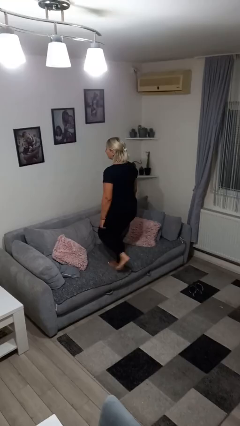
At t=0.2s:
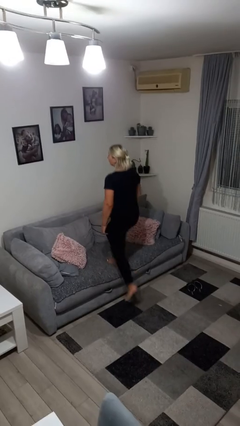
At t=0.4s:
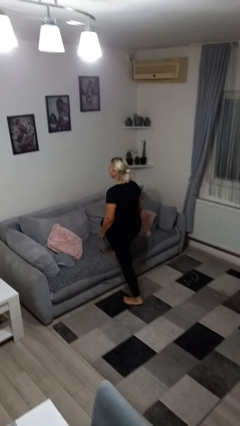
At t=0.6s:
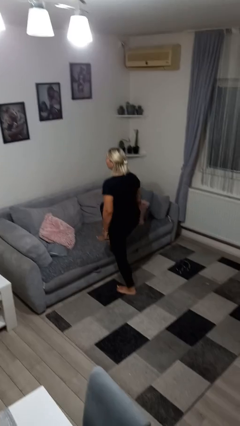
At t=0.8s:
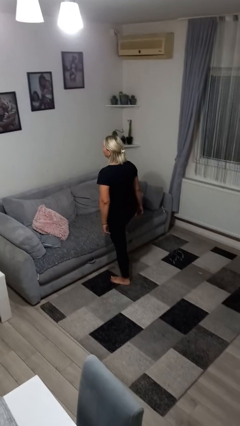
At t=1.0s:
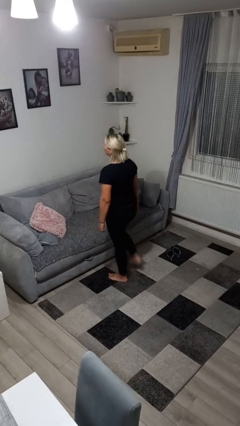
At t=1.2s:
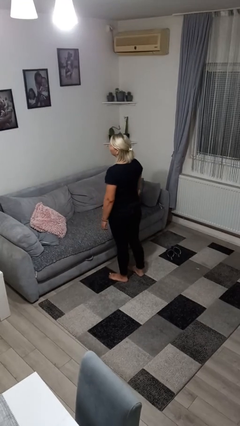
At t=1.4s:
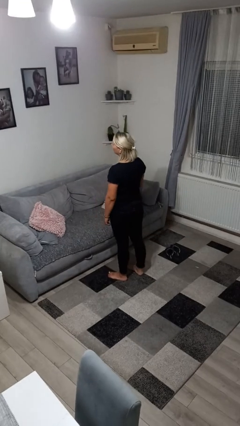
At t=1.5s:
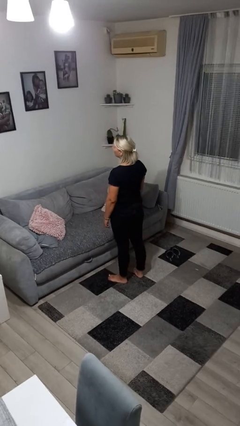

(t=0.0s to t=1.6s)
person climbs off couch

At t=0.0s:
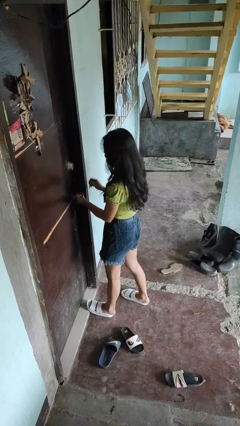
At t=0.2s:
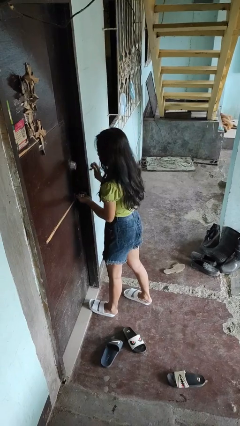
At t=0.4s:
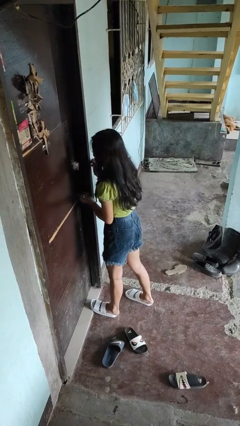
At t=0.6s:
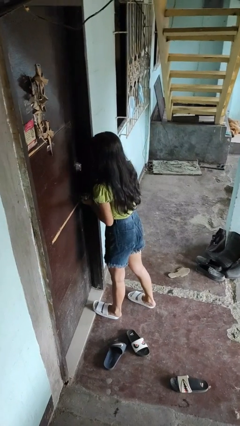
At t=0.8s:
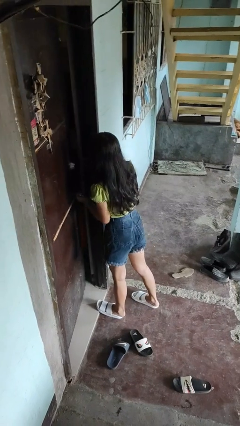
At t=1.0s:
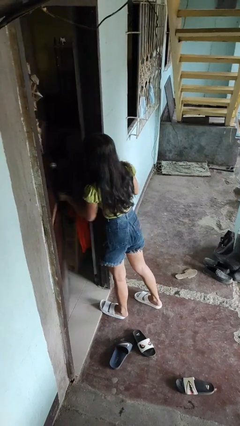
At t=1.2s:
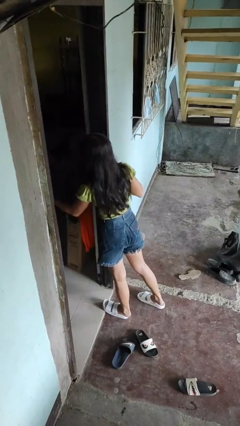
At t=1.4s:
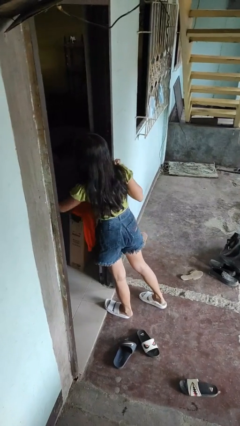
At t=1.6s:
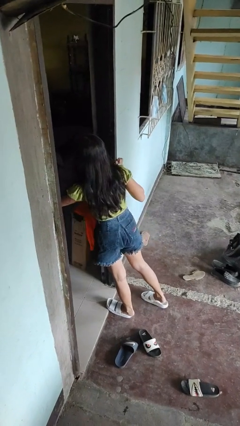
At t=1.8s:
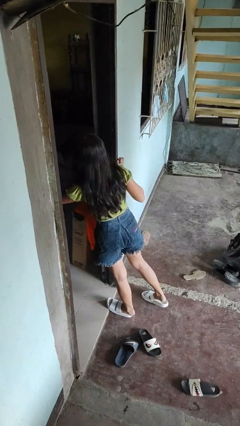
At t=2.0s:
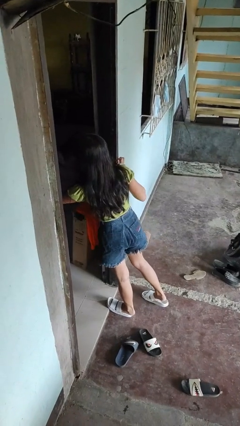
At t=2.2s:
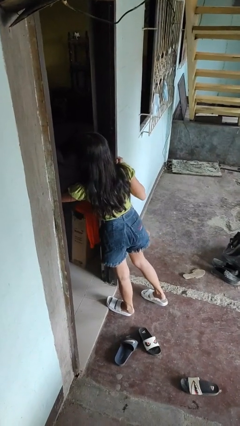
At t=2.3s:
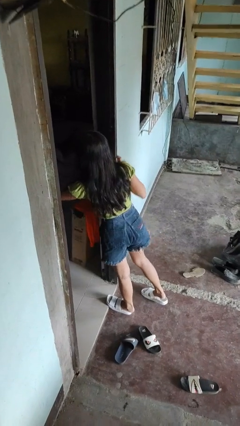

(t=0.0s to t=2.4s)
person opens facility door

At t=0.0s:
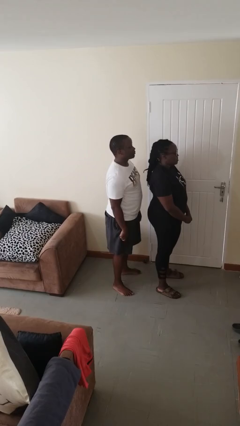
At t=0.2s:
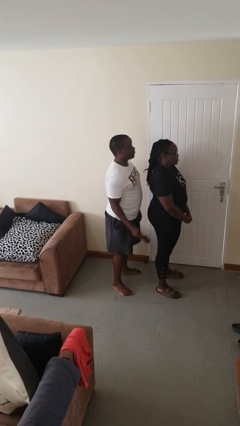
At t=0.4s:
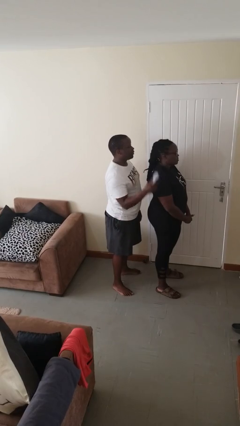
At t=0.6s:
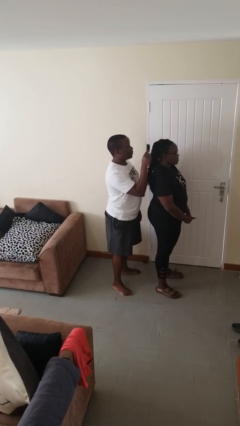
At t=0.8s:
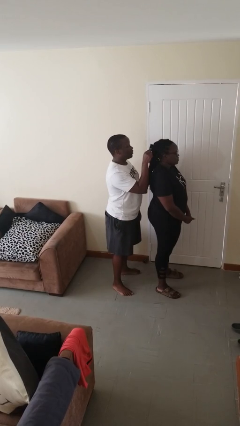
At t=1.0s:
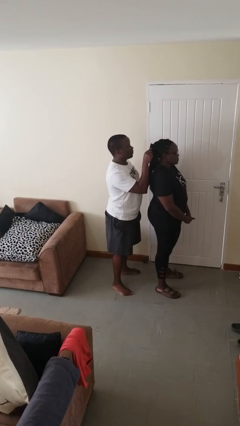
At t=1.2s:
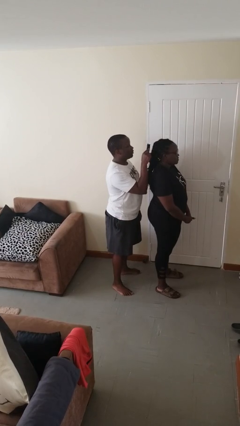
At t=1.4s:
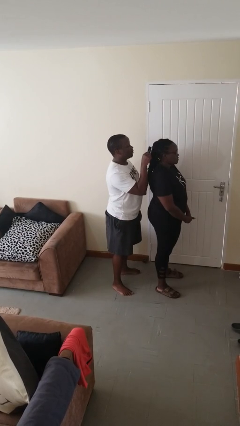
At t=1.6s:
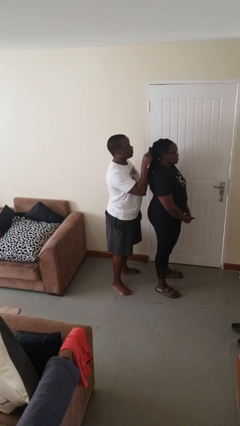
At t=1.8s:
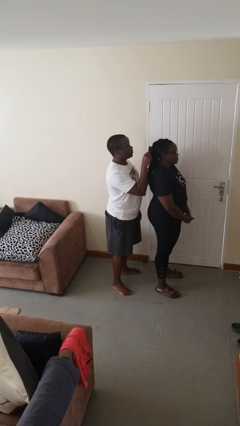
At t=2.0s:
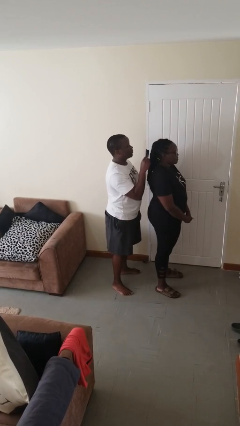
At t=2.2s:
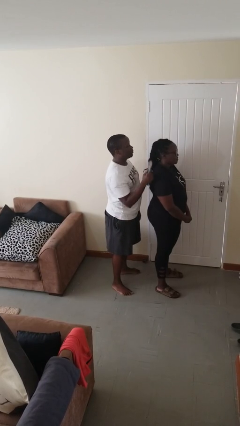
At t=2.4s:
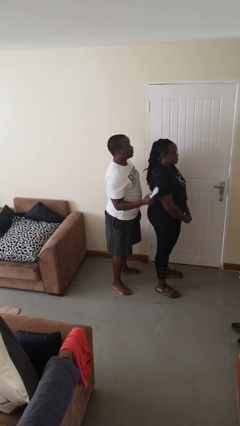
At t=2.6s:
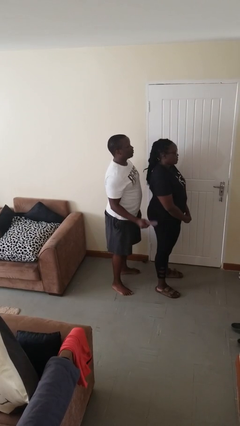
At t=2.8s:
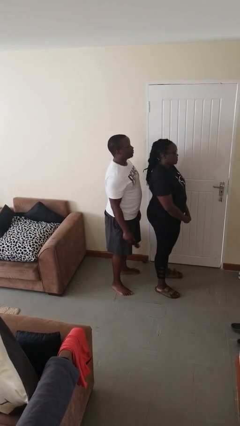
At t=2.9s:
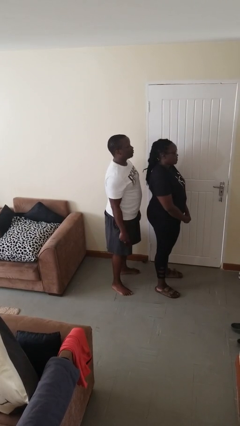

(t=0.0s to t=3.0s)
person brushes hair of person

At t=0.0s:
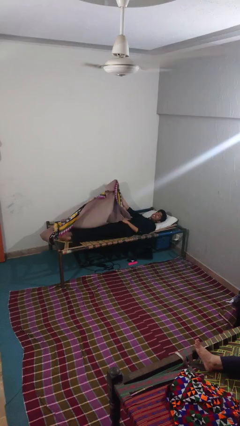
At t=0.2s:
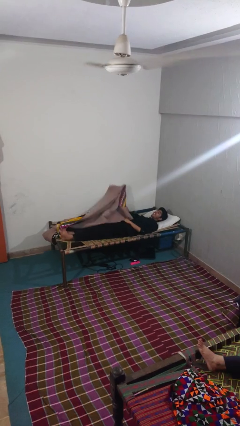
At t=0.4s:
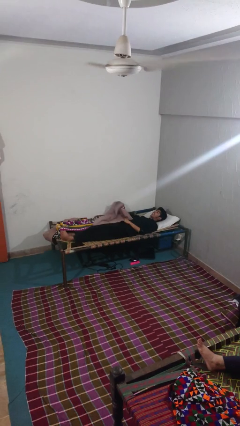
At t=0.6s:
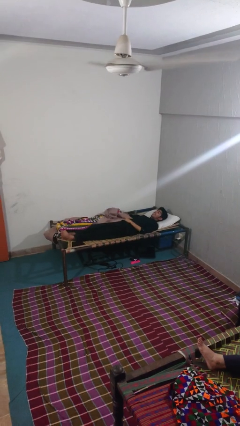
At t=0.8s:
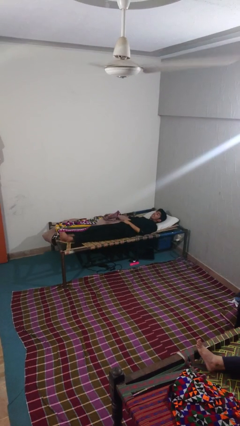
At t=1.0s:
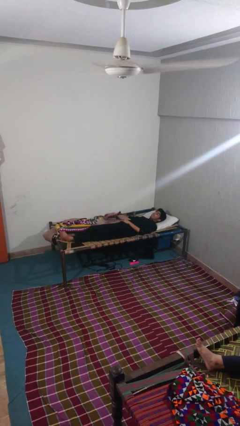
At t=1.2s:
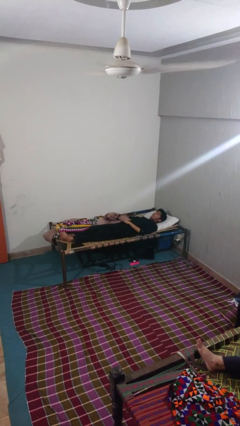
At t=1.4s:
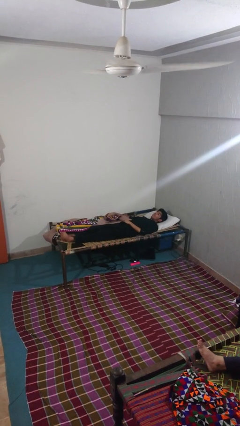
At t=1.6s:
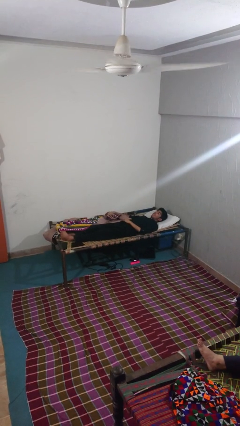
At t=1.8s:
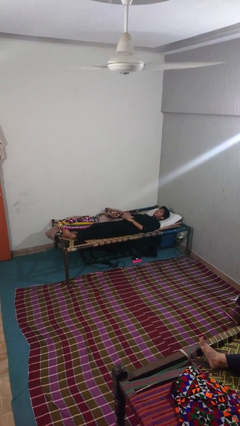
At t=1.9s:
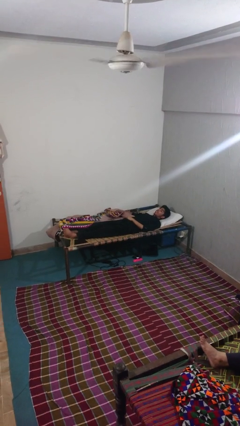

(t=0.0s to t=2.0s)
person uncovers with bedsheets

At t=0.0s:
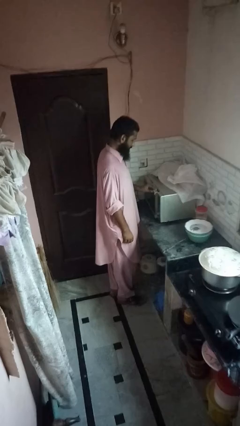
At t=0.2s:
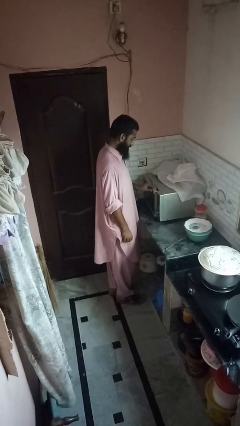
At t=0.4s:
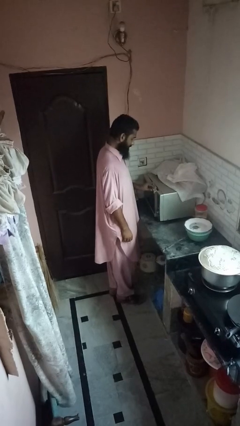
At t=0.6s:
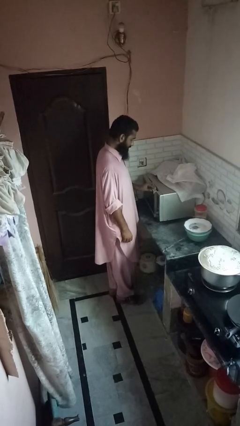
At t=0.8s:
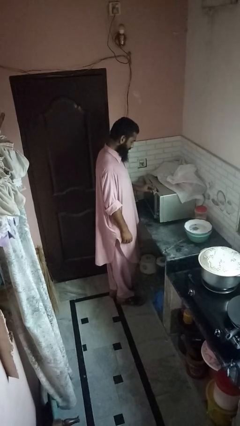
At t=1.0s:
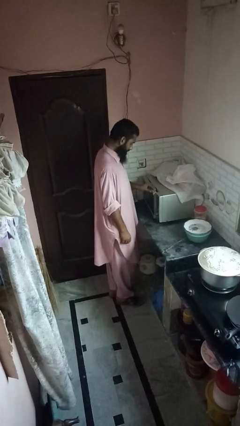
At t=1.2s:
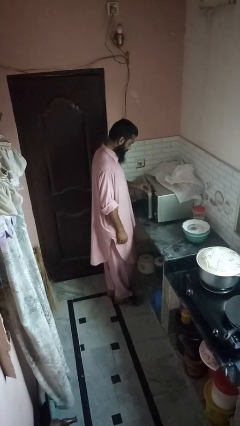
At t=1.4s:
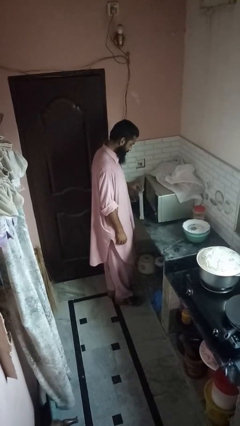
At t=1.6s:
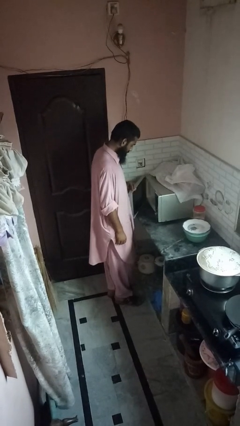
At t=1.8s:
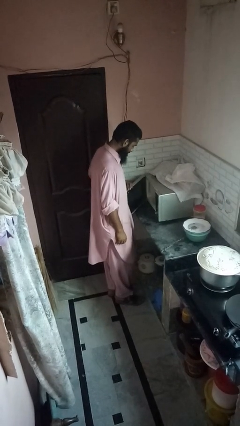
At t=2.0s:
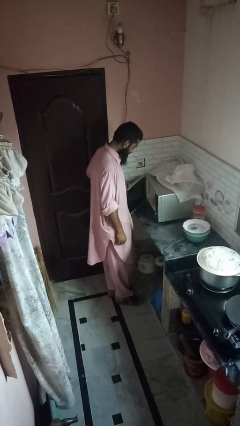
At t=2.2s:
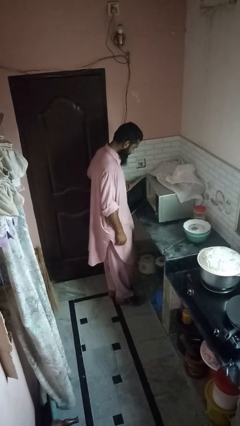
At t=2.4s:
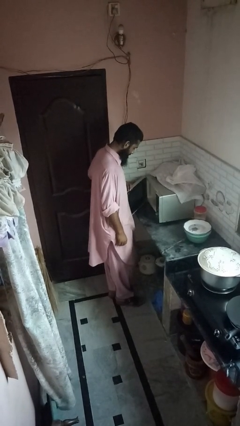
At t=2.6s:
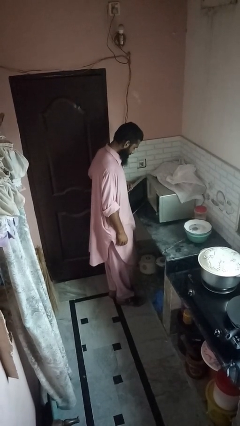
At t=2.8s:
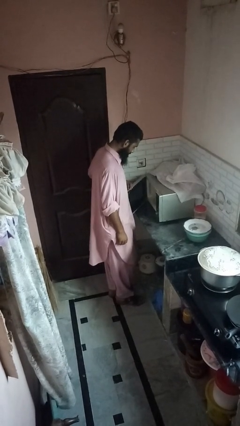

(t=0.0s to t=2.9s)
person opens oven door

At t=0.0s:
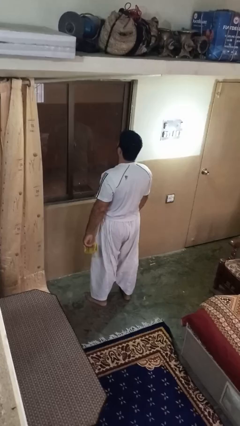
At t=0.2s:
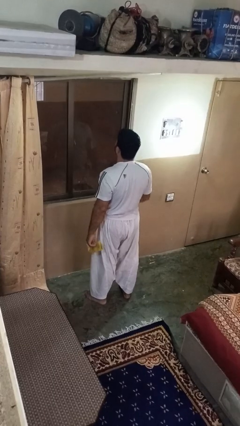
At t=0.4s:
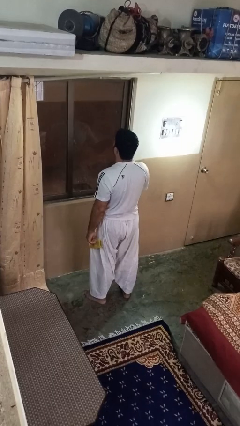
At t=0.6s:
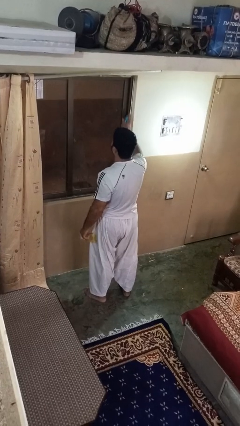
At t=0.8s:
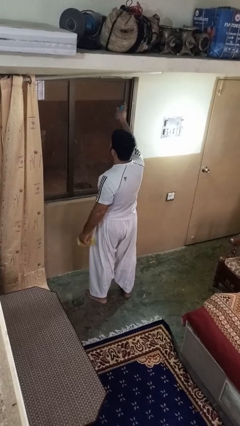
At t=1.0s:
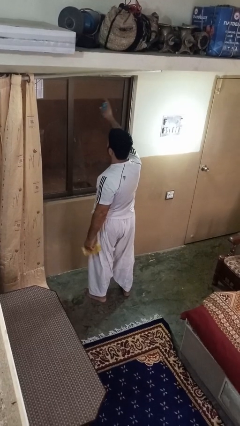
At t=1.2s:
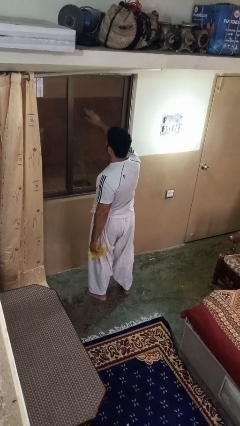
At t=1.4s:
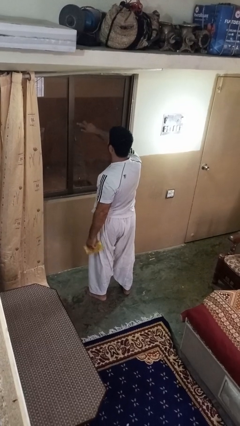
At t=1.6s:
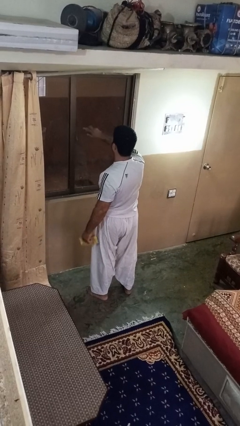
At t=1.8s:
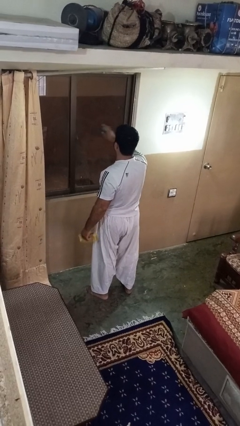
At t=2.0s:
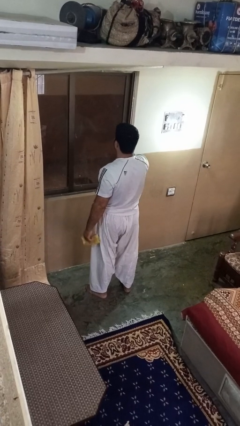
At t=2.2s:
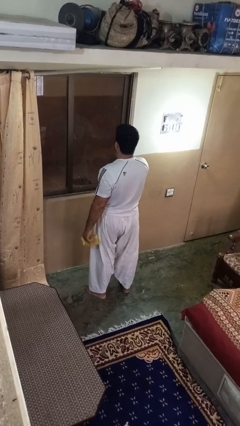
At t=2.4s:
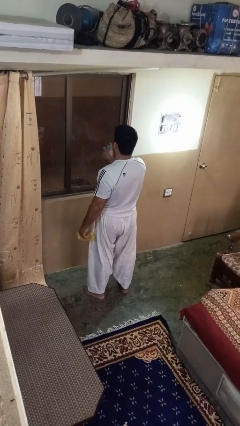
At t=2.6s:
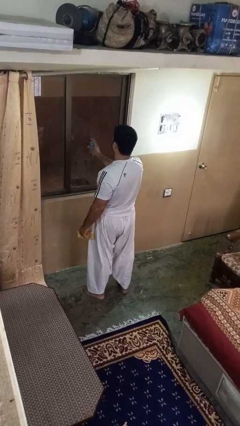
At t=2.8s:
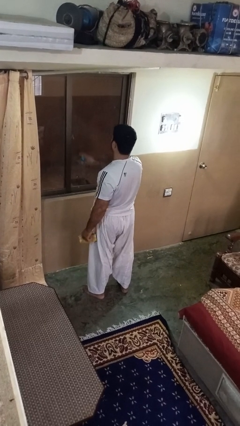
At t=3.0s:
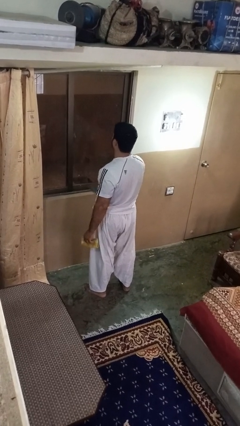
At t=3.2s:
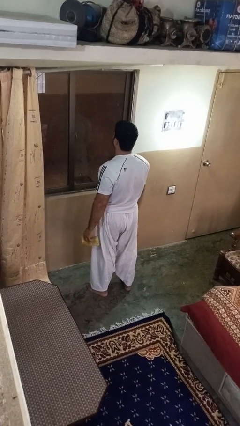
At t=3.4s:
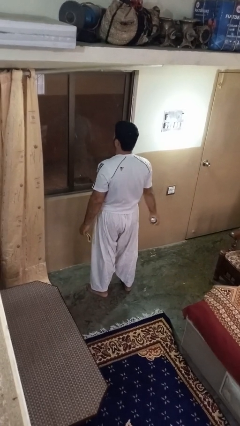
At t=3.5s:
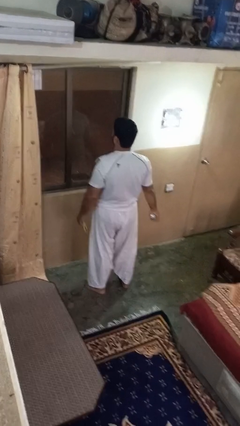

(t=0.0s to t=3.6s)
person sprays from bottle

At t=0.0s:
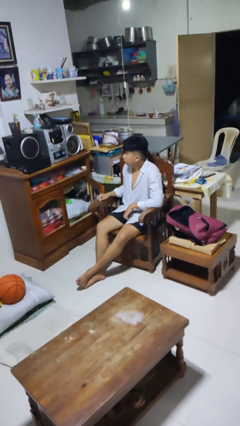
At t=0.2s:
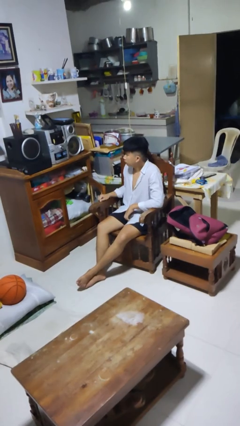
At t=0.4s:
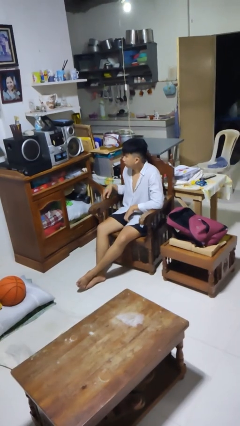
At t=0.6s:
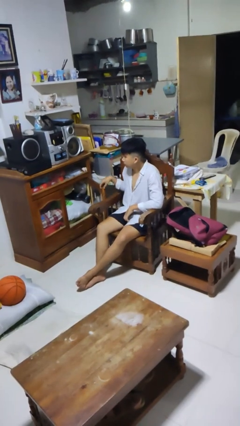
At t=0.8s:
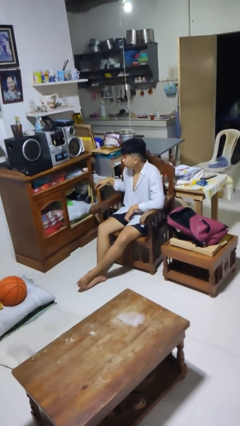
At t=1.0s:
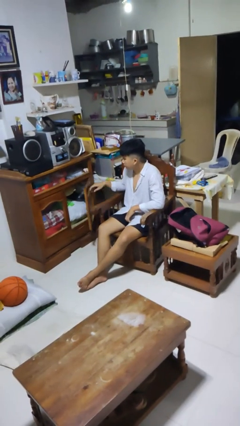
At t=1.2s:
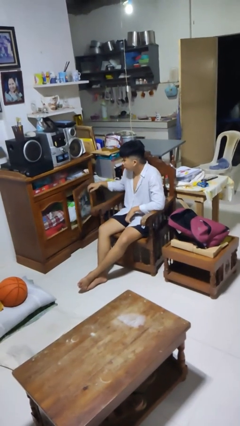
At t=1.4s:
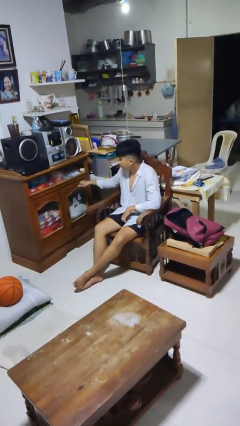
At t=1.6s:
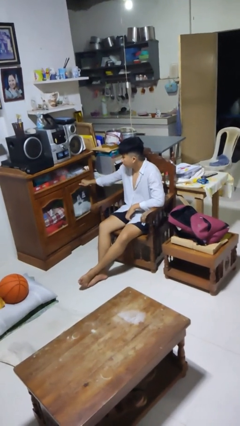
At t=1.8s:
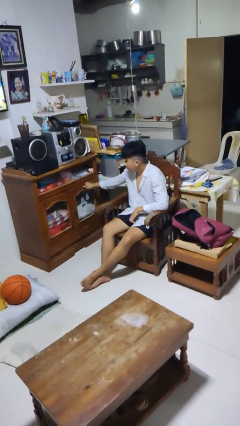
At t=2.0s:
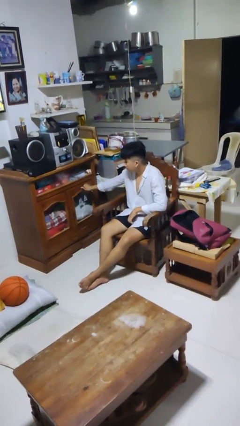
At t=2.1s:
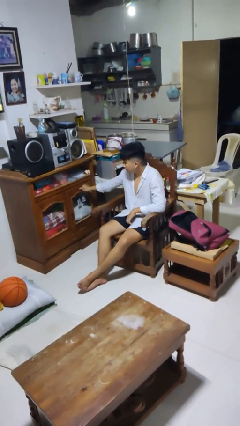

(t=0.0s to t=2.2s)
person closes dresser drawer
